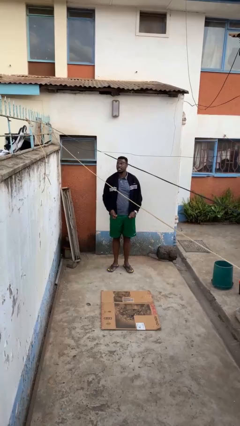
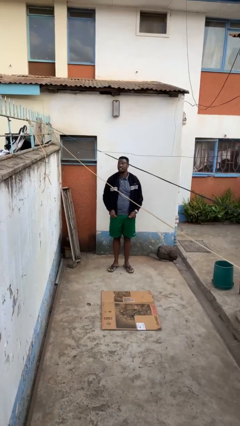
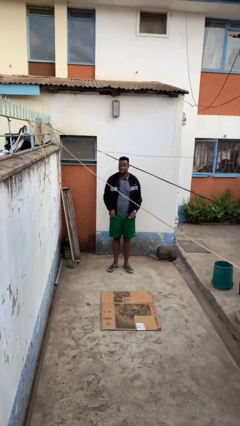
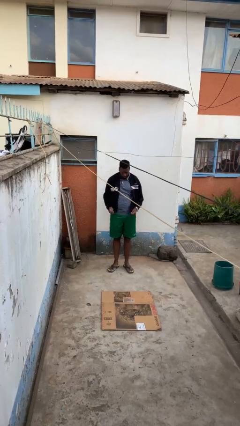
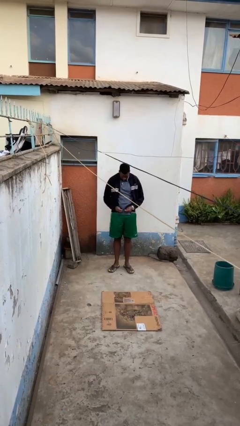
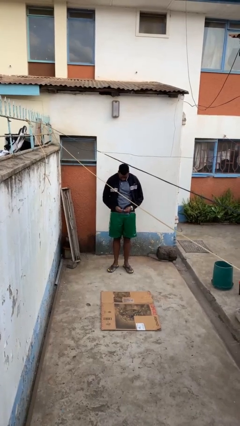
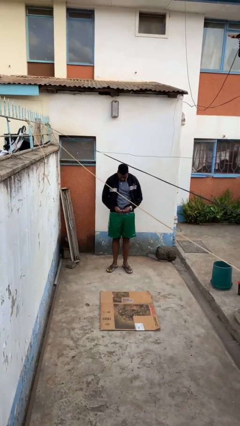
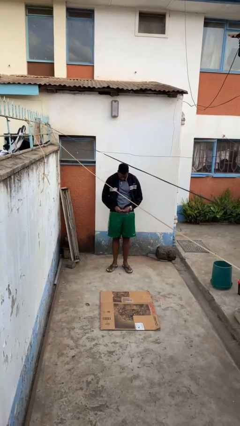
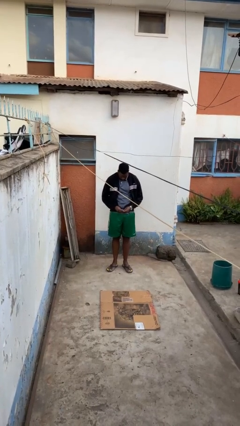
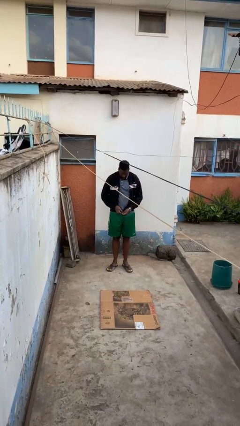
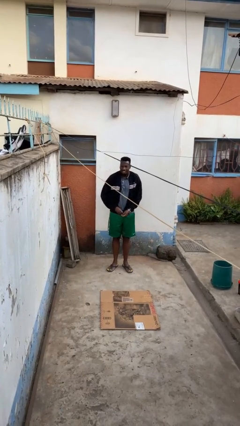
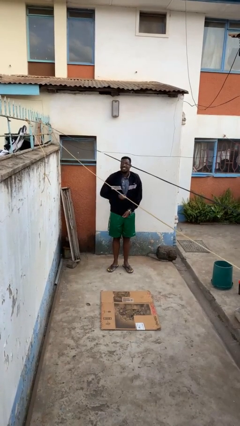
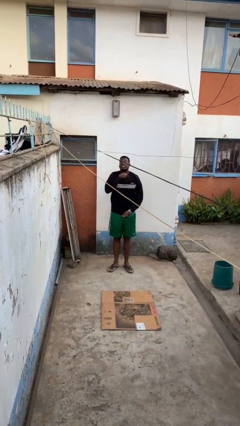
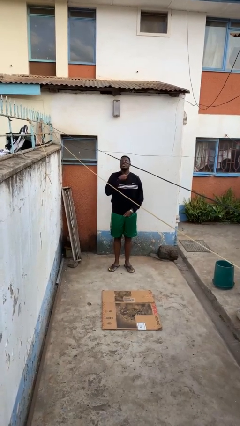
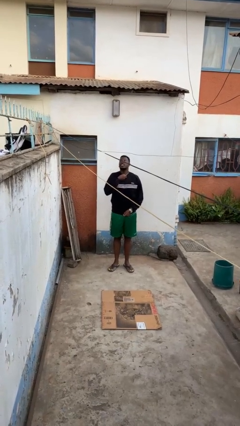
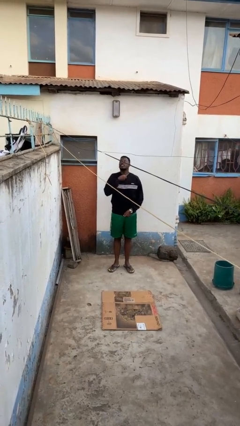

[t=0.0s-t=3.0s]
person zips up jacket

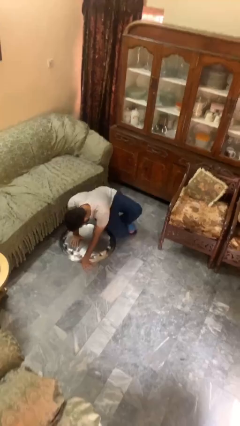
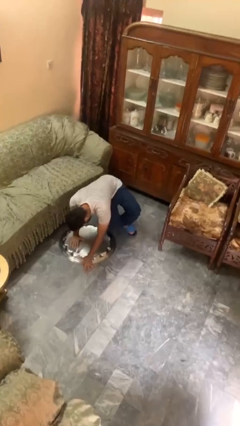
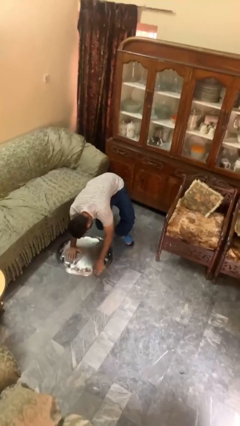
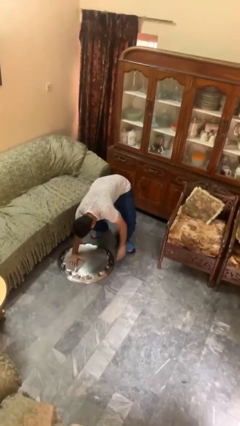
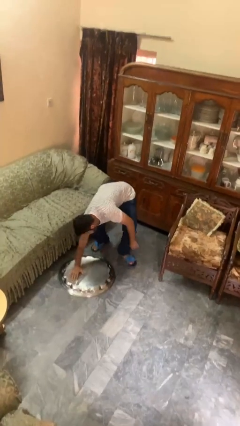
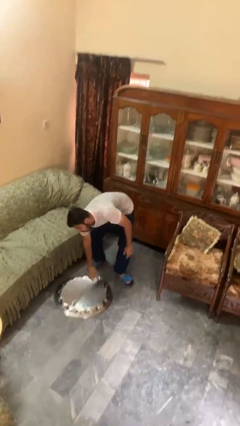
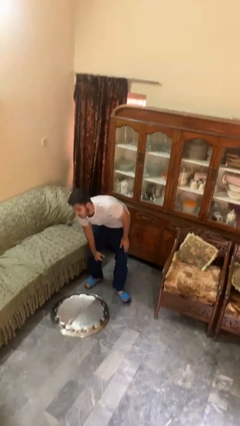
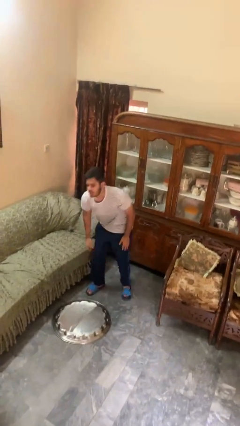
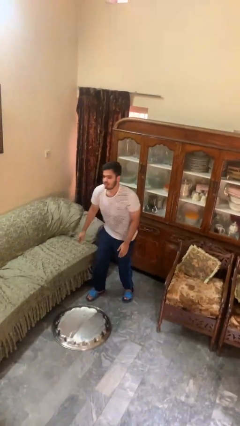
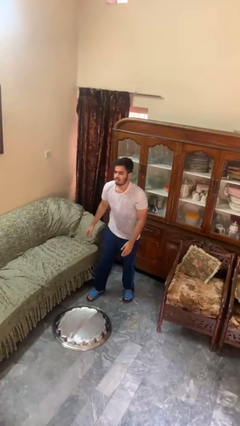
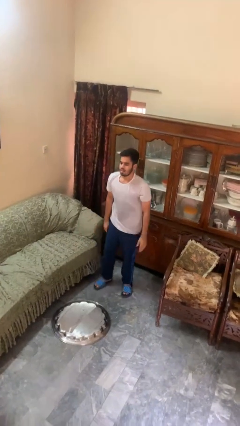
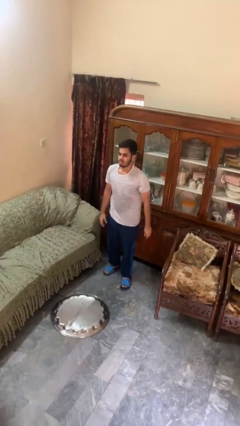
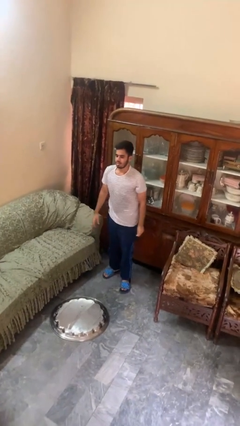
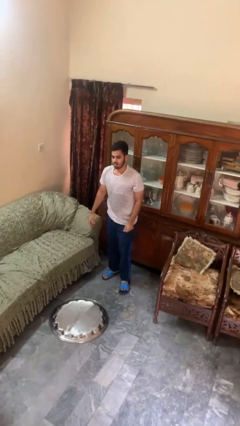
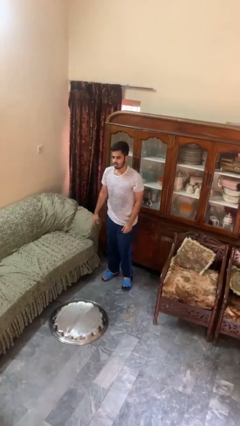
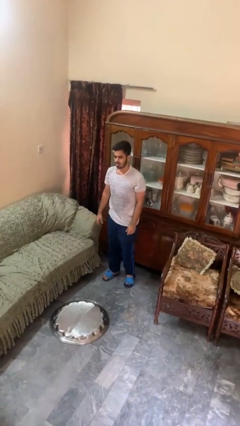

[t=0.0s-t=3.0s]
person stands up from floor

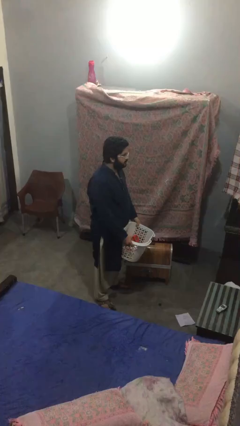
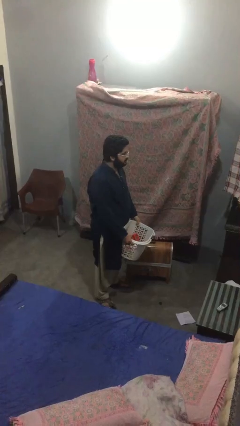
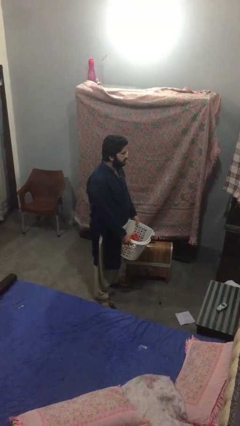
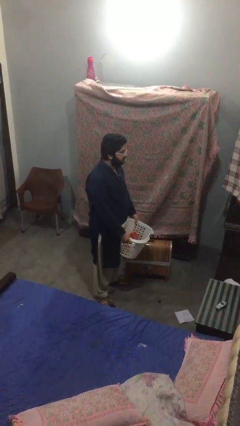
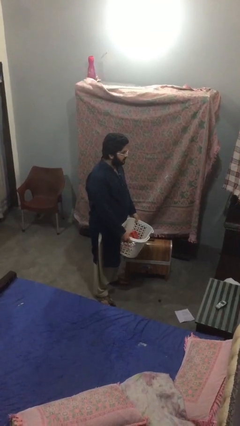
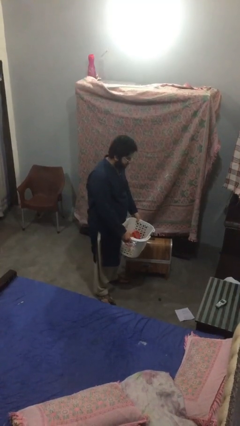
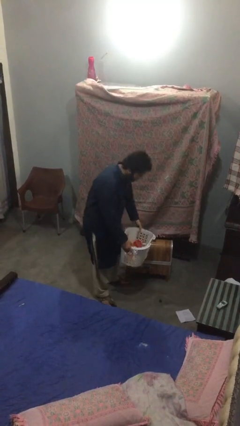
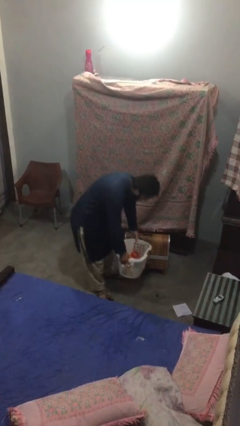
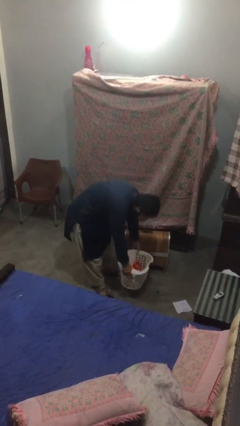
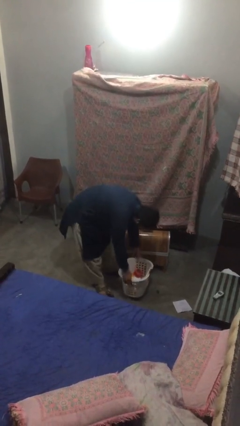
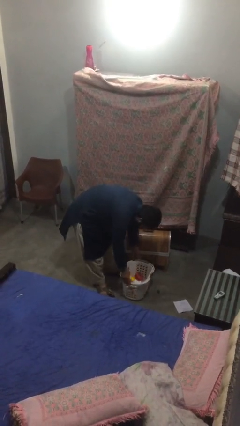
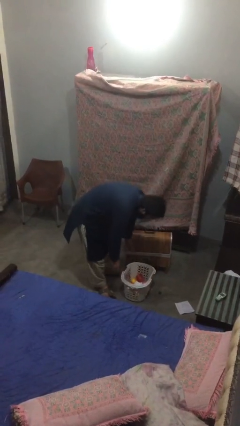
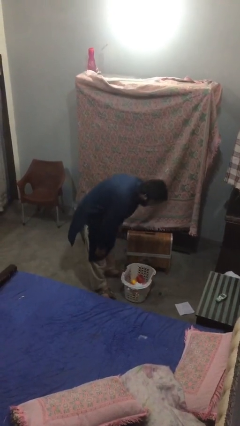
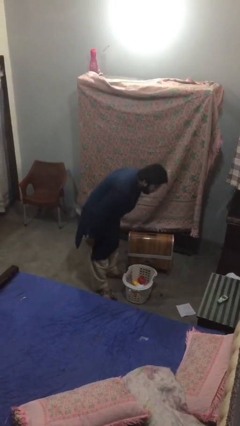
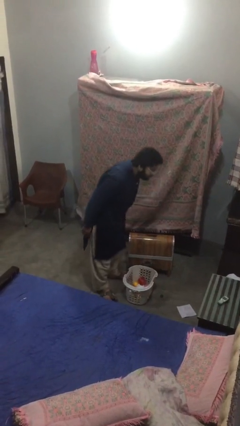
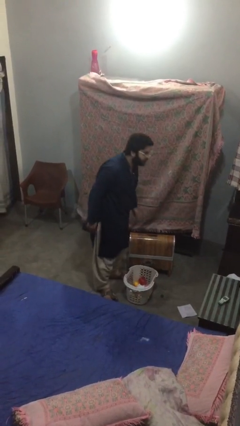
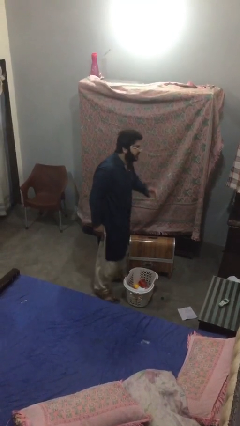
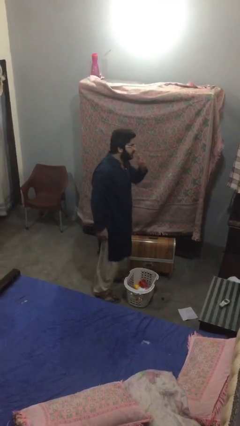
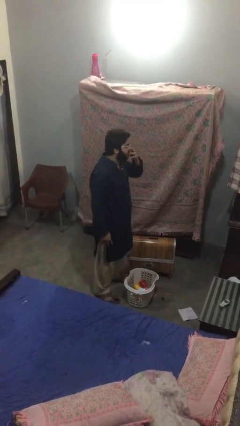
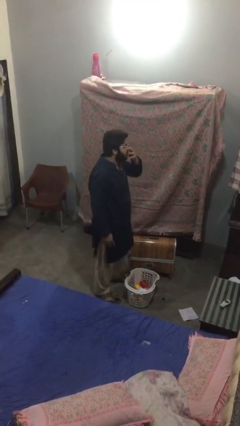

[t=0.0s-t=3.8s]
person puts down object on floor

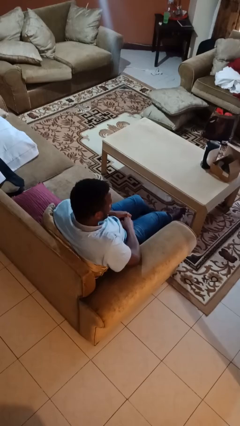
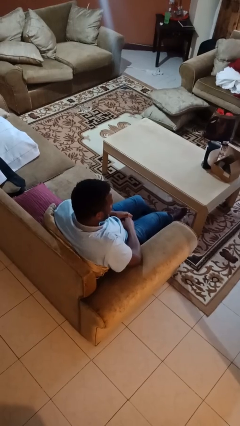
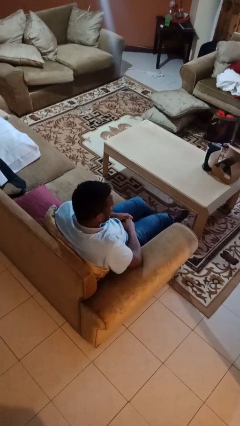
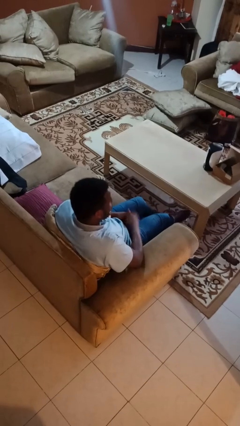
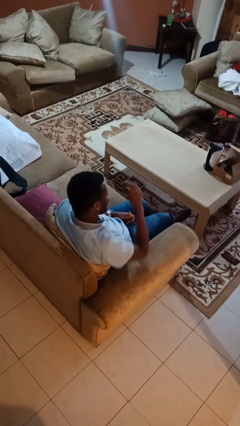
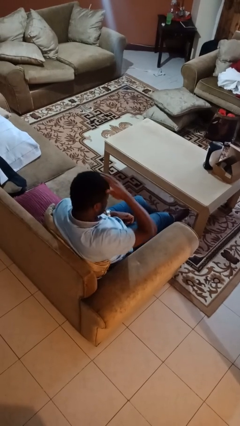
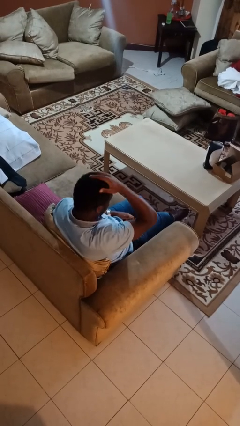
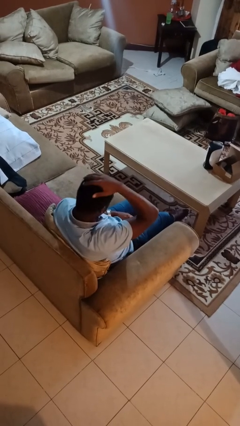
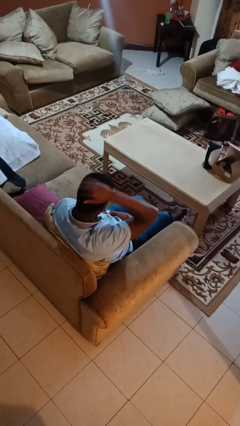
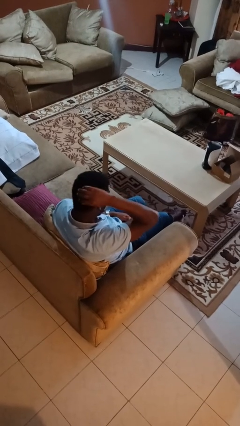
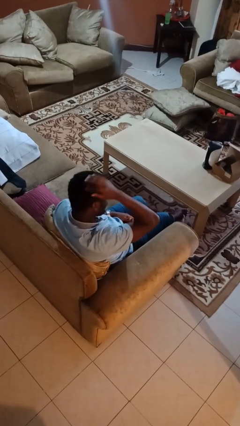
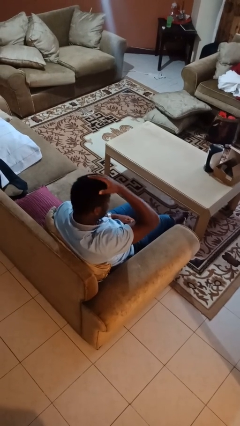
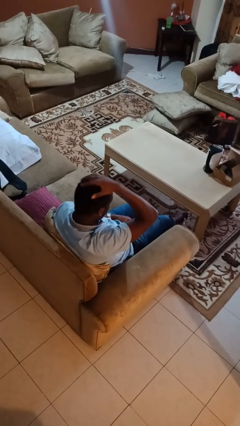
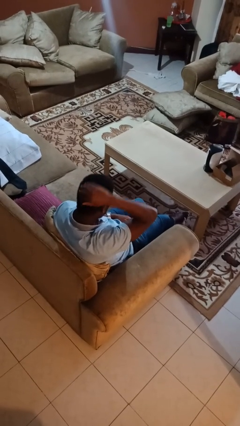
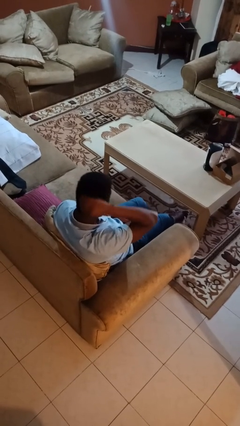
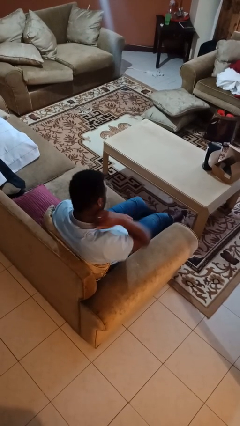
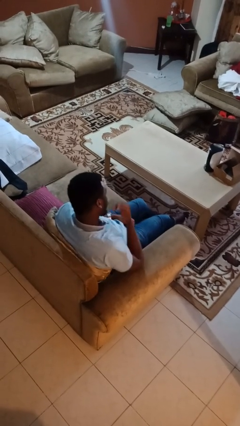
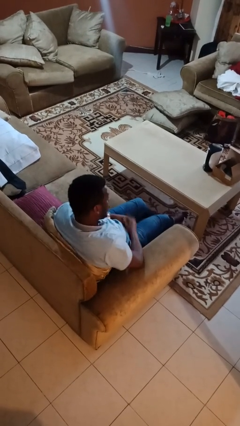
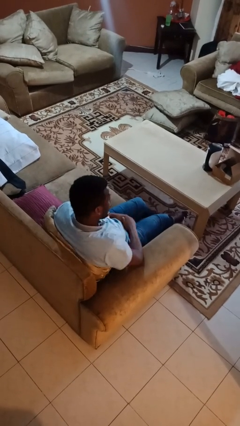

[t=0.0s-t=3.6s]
person strokes hair

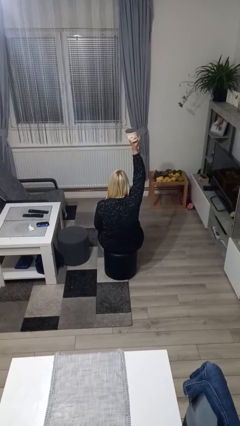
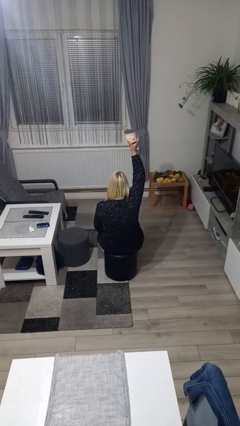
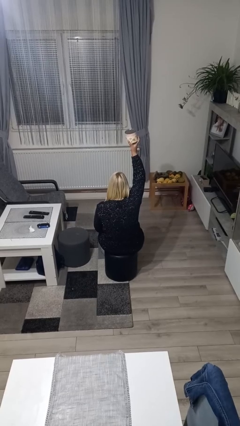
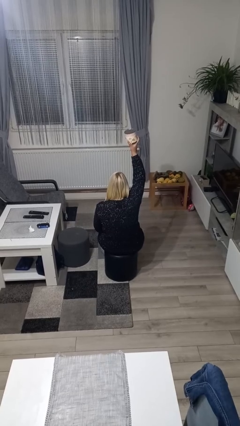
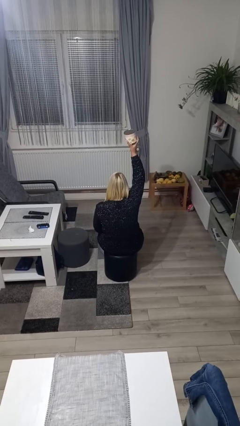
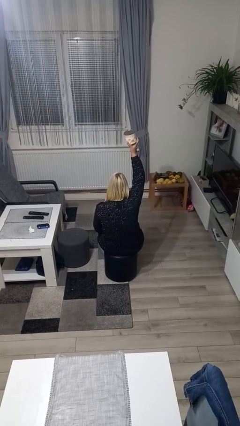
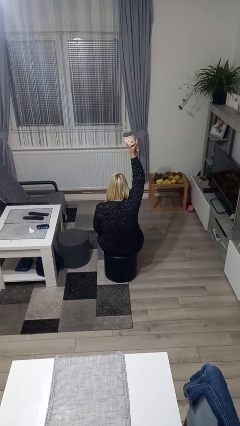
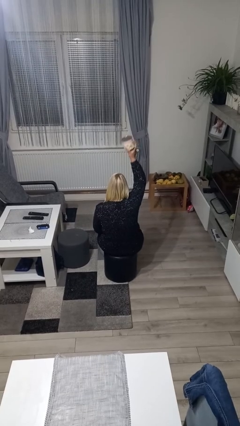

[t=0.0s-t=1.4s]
person holds object above head

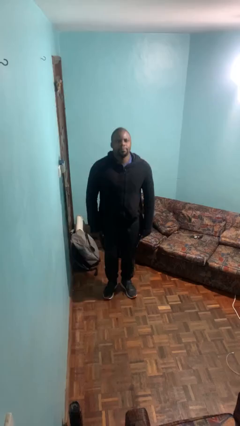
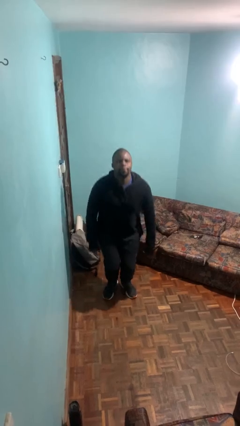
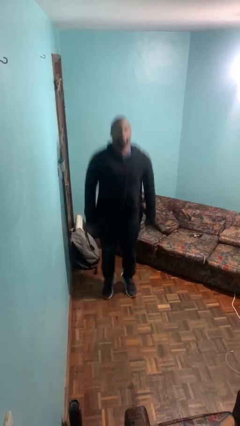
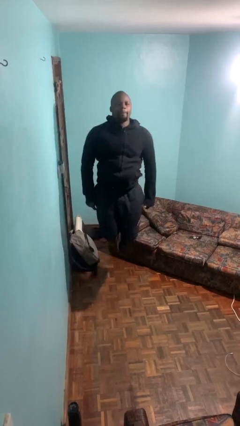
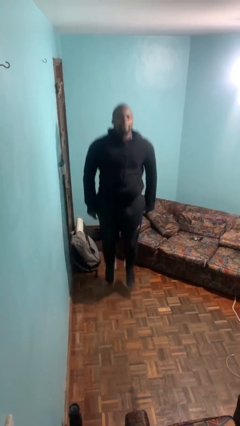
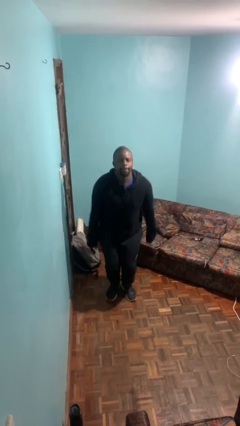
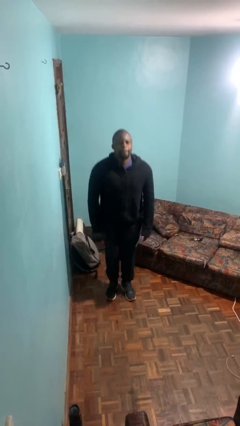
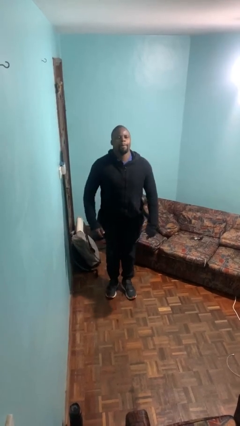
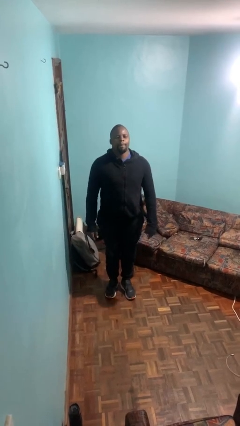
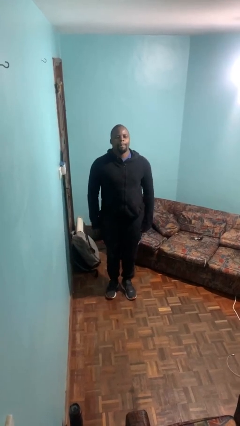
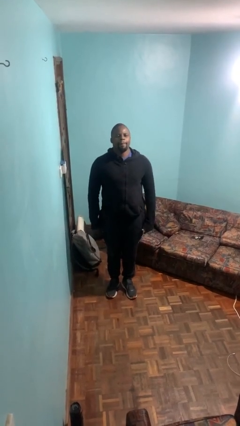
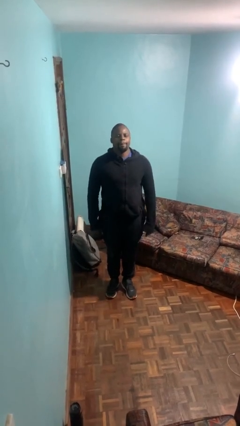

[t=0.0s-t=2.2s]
person jumps
